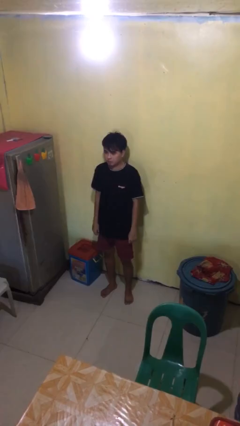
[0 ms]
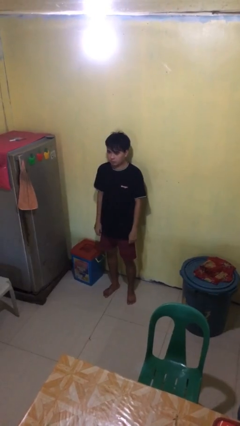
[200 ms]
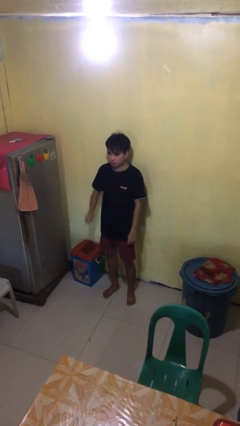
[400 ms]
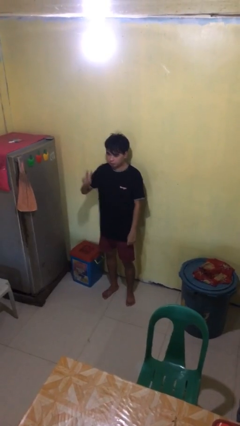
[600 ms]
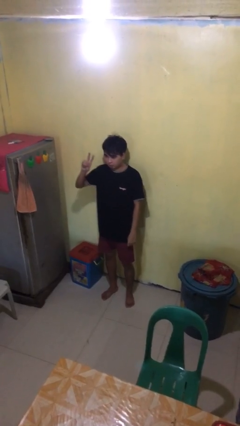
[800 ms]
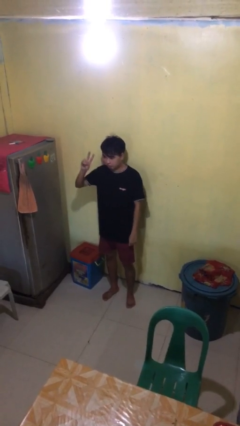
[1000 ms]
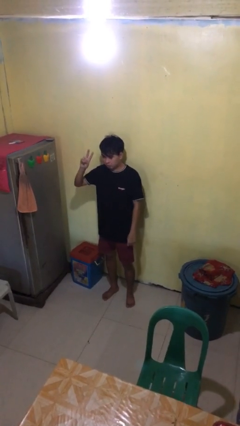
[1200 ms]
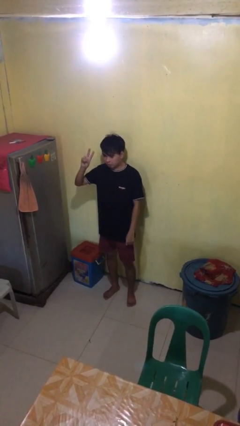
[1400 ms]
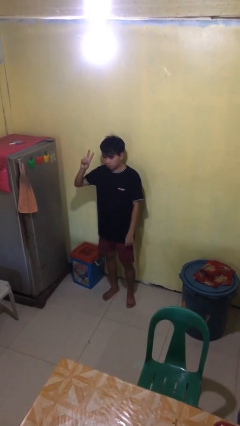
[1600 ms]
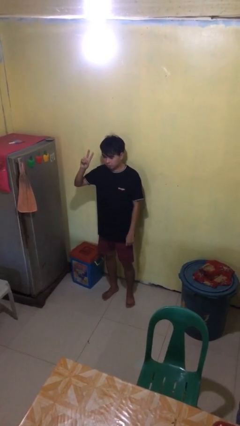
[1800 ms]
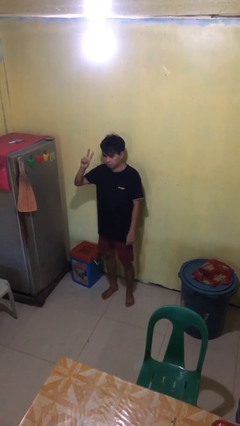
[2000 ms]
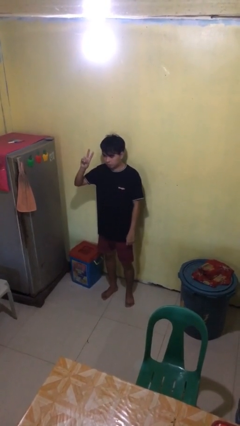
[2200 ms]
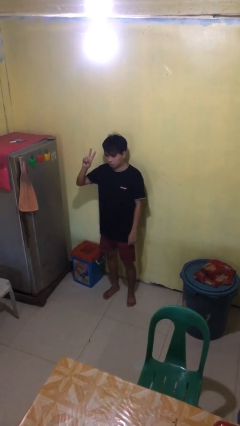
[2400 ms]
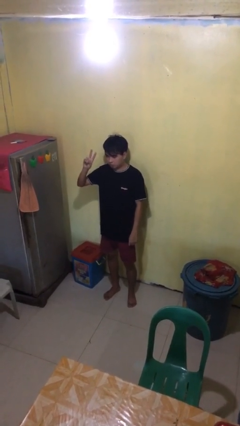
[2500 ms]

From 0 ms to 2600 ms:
person gestures peace

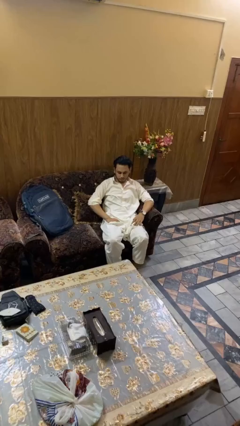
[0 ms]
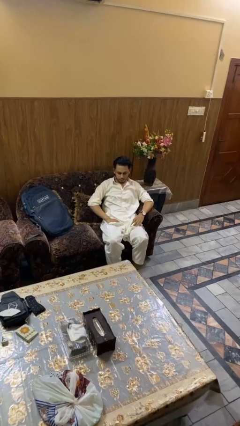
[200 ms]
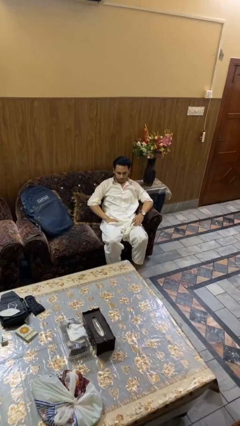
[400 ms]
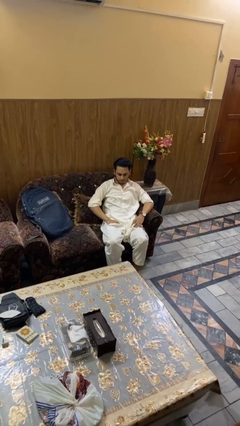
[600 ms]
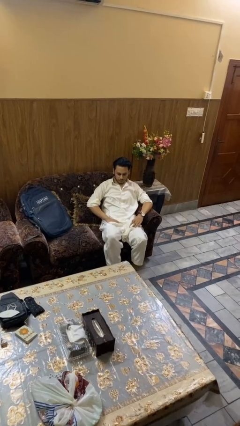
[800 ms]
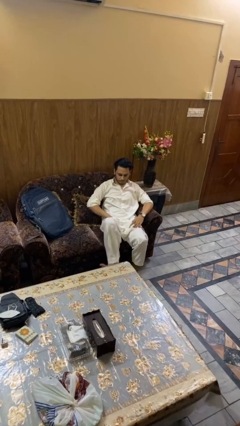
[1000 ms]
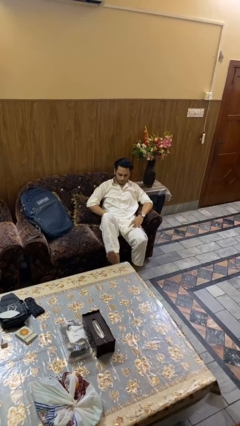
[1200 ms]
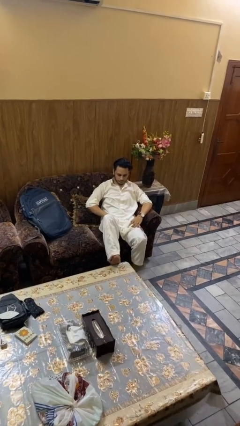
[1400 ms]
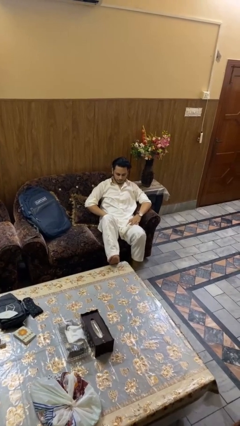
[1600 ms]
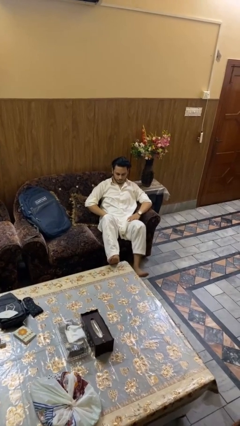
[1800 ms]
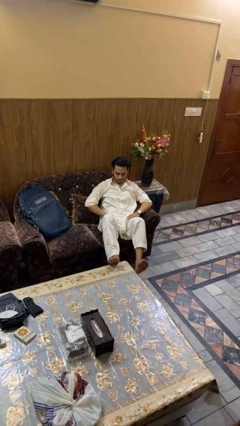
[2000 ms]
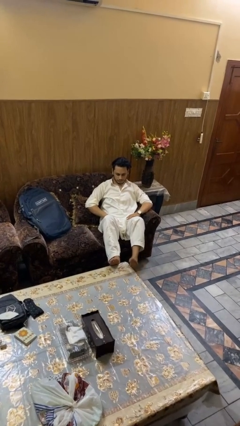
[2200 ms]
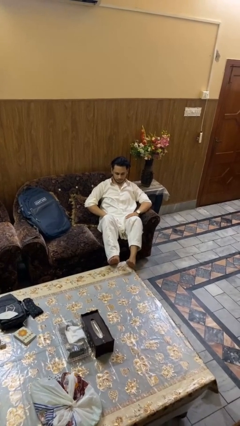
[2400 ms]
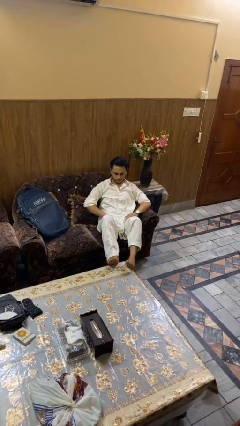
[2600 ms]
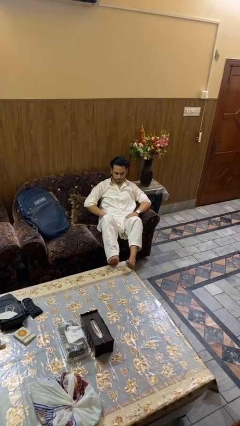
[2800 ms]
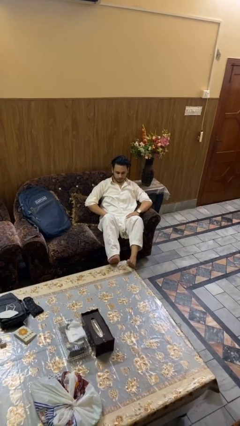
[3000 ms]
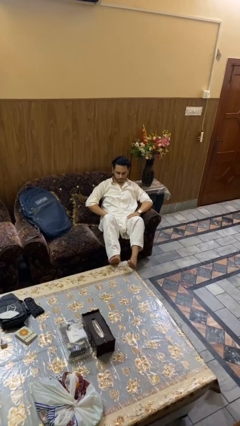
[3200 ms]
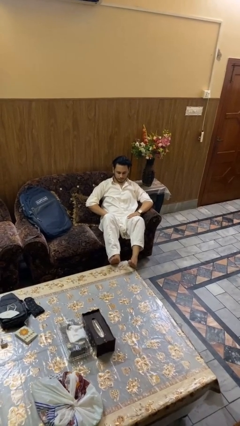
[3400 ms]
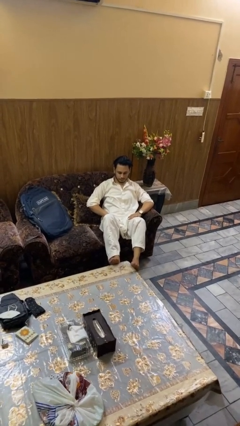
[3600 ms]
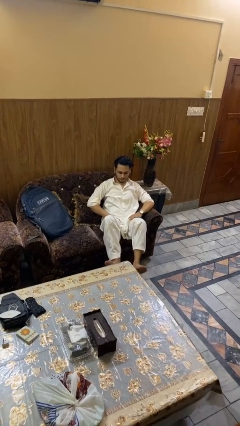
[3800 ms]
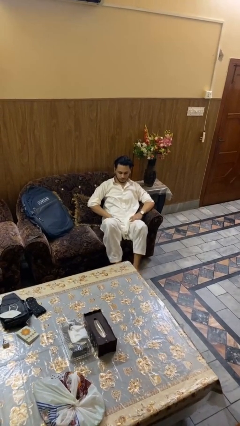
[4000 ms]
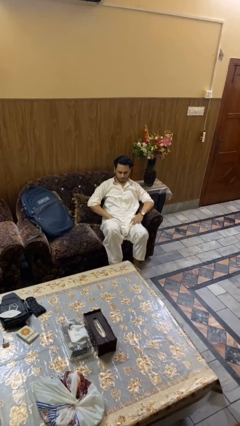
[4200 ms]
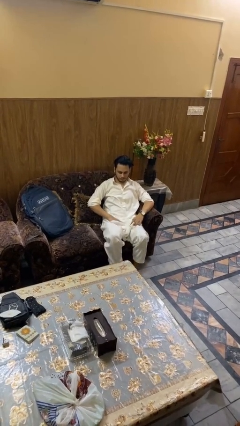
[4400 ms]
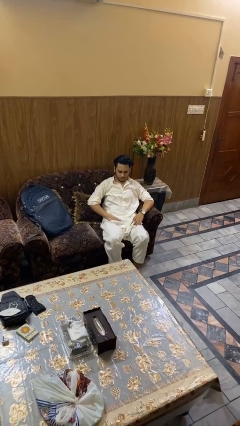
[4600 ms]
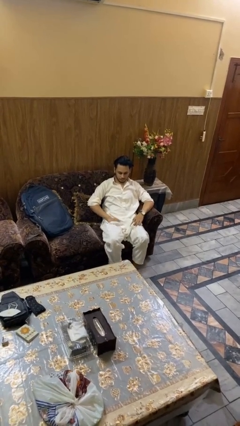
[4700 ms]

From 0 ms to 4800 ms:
person puts feet up

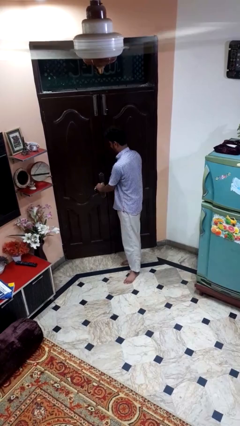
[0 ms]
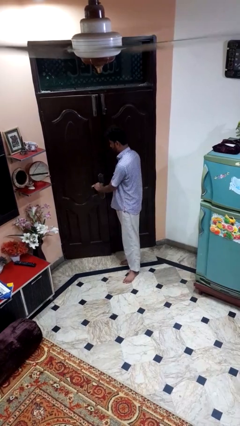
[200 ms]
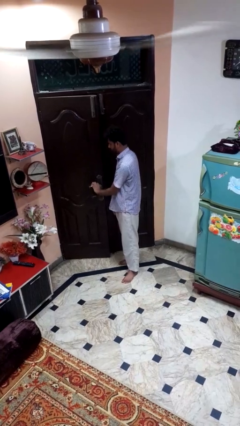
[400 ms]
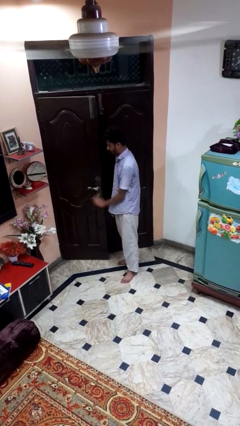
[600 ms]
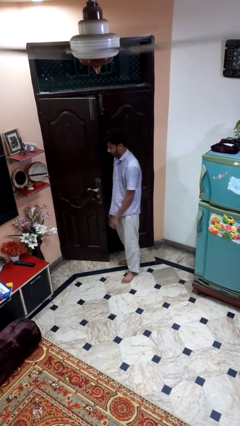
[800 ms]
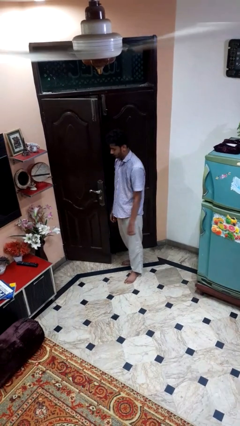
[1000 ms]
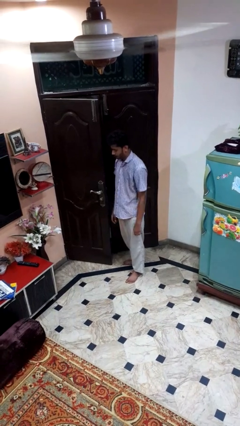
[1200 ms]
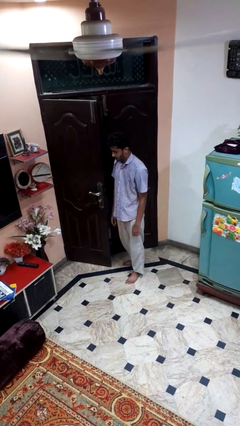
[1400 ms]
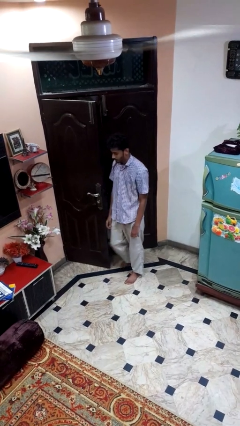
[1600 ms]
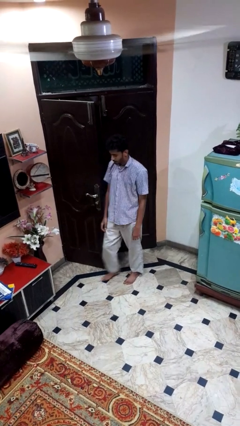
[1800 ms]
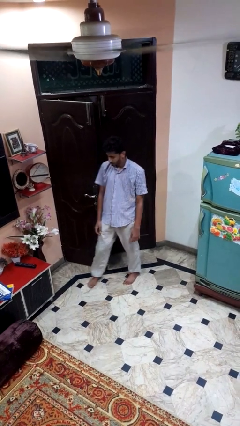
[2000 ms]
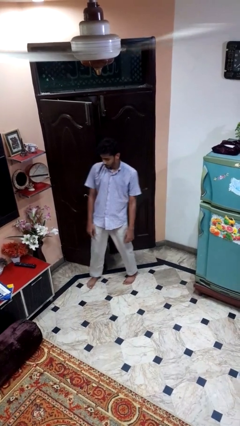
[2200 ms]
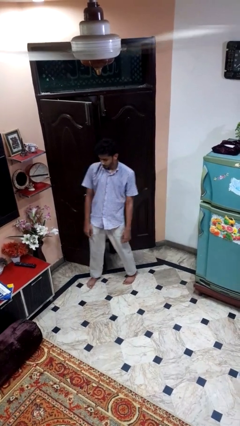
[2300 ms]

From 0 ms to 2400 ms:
person opens facility door

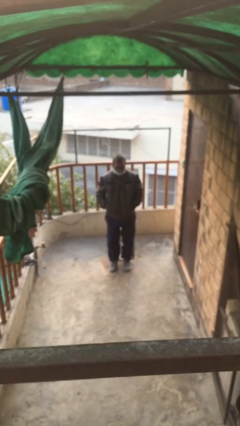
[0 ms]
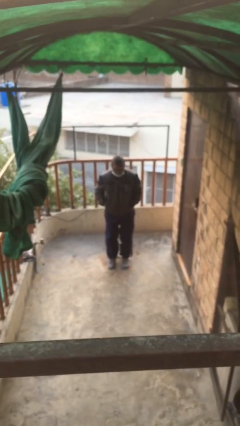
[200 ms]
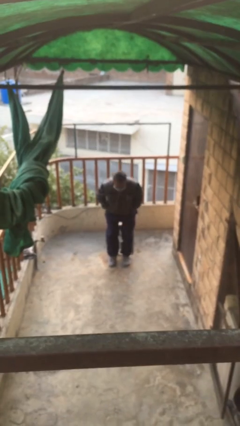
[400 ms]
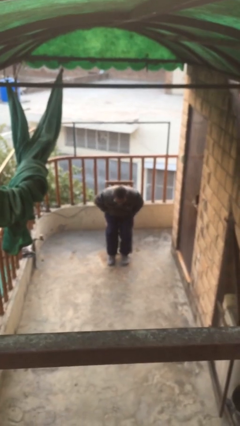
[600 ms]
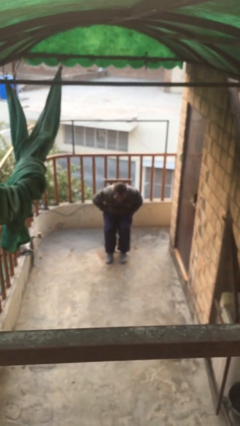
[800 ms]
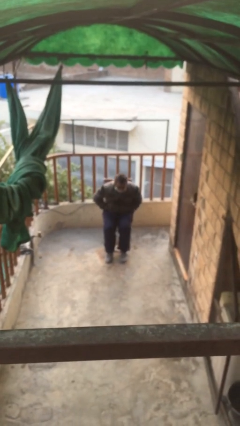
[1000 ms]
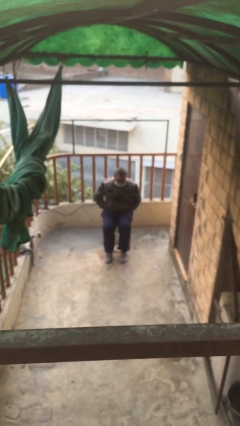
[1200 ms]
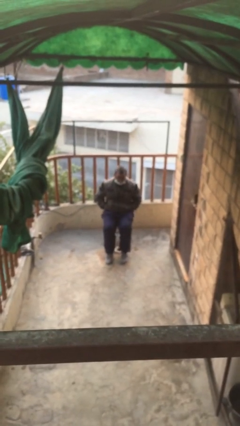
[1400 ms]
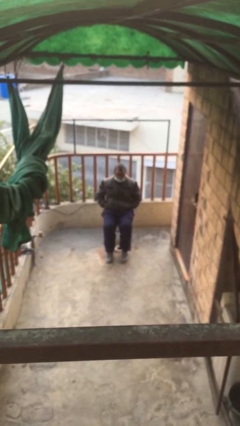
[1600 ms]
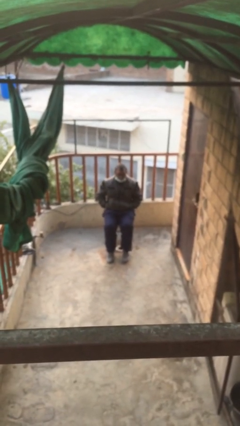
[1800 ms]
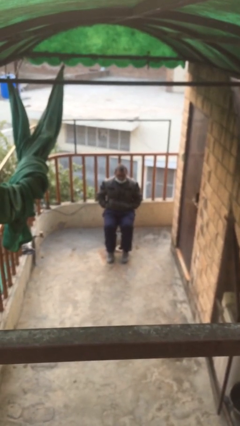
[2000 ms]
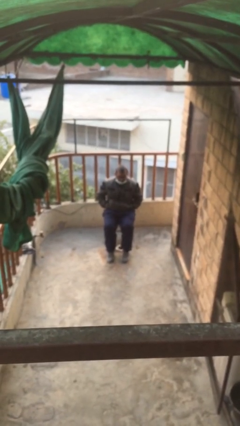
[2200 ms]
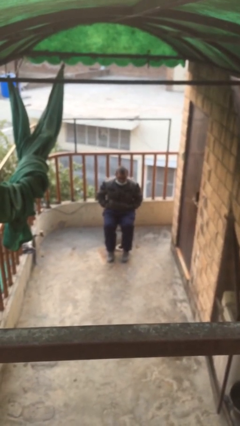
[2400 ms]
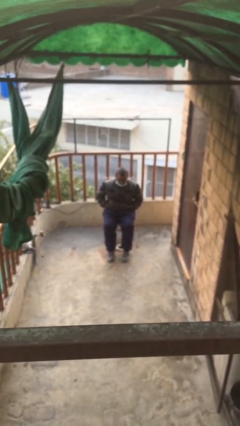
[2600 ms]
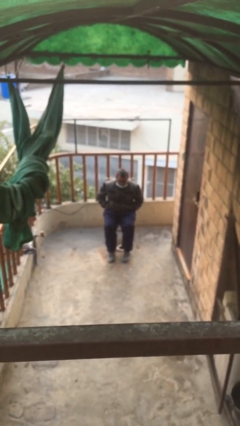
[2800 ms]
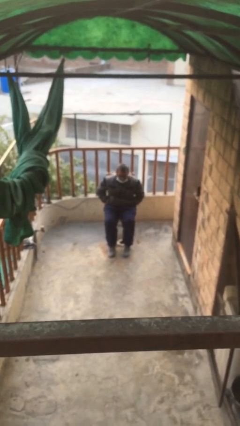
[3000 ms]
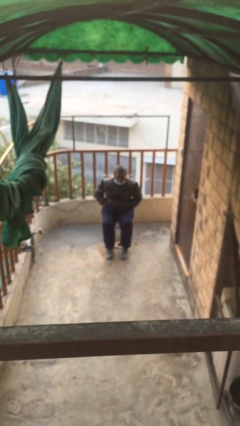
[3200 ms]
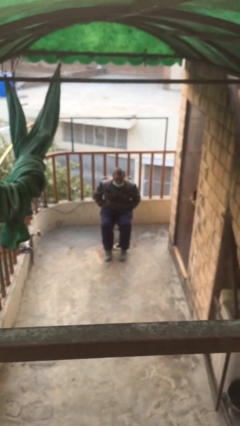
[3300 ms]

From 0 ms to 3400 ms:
person sits down

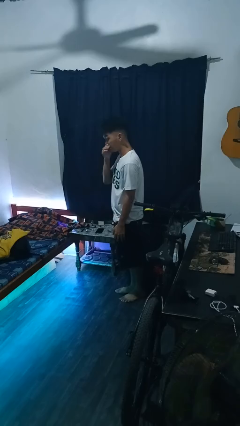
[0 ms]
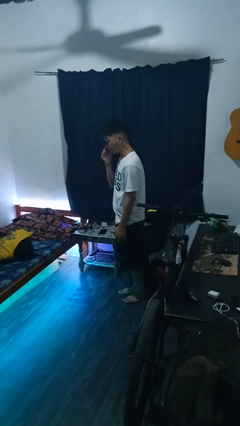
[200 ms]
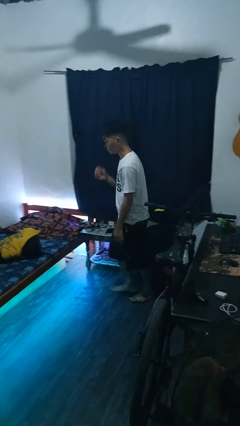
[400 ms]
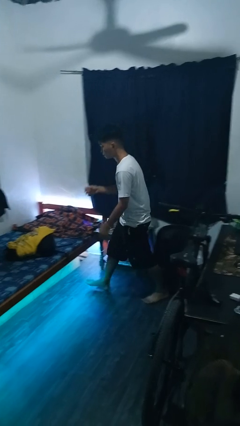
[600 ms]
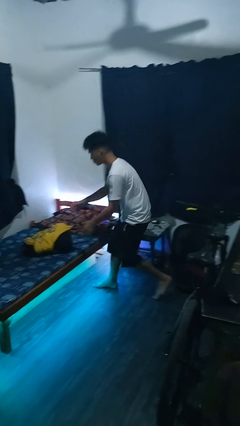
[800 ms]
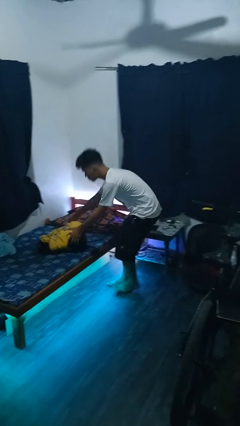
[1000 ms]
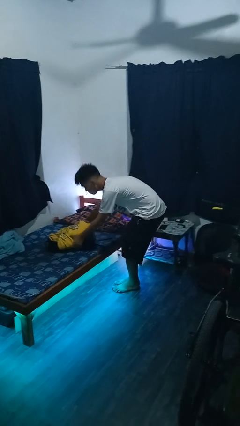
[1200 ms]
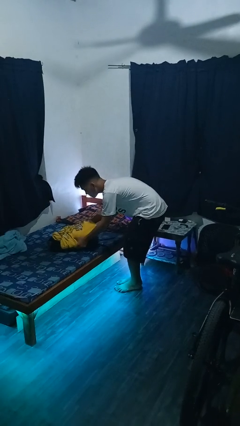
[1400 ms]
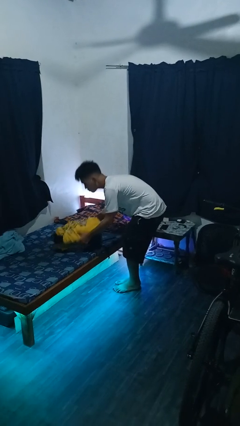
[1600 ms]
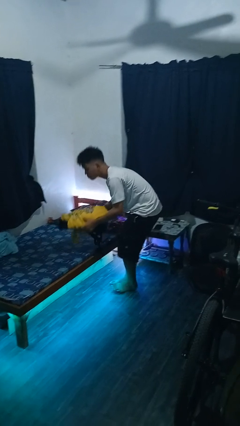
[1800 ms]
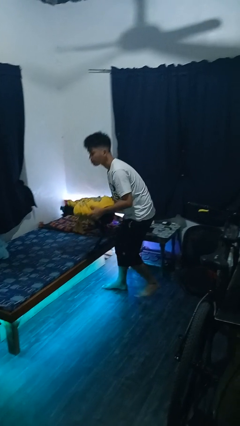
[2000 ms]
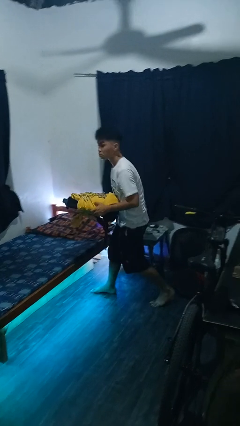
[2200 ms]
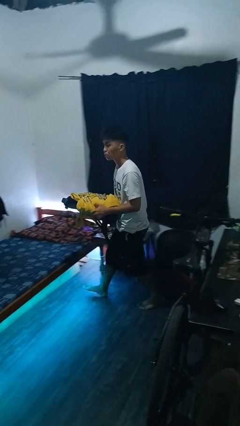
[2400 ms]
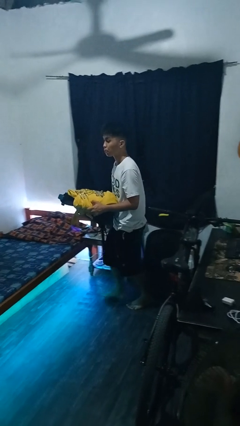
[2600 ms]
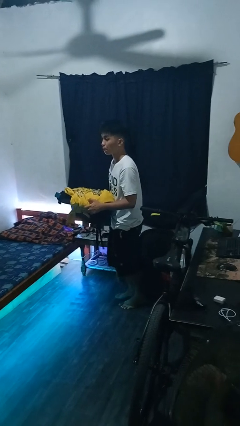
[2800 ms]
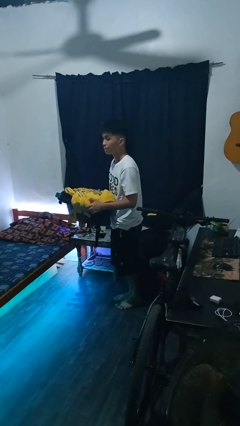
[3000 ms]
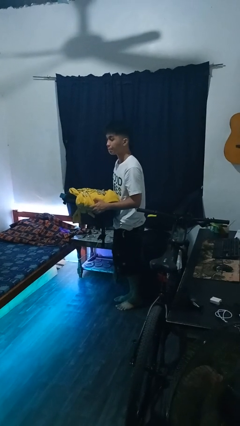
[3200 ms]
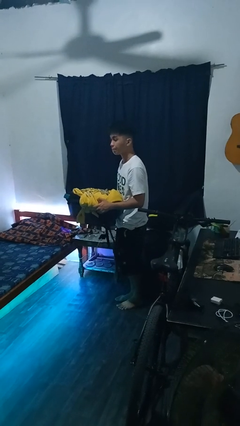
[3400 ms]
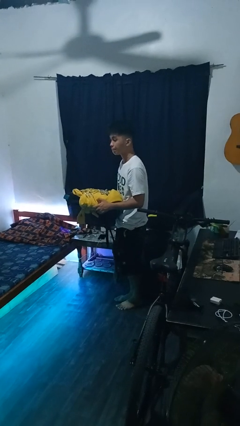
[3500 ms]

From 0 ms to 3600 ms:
person picks up object from bed

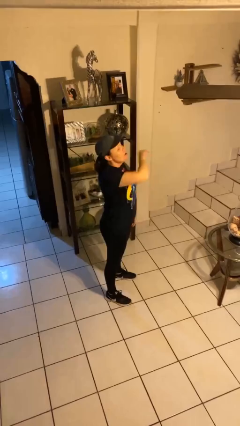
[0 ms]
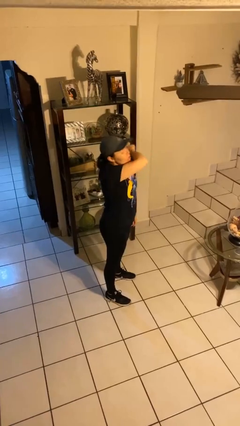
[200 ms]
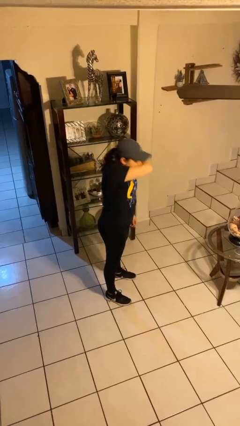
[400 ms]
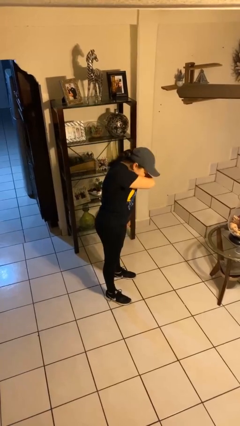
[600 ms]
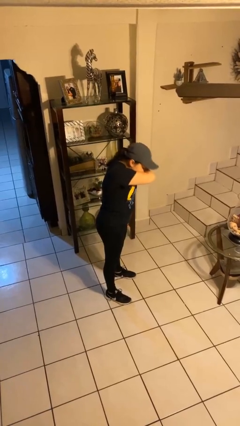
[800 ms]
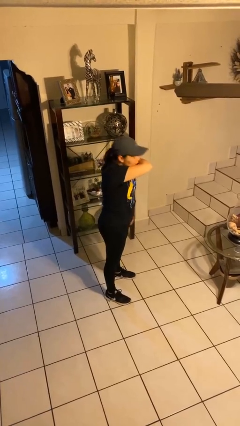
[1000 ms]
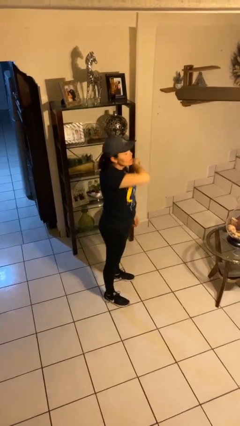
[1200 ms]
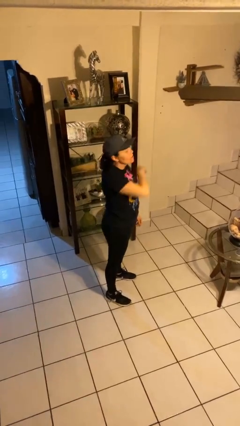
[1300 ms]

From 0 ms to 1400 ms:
person sneezes into arm
